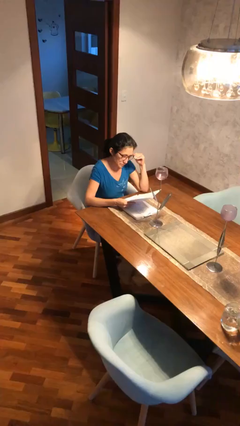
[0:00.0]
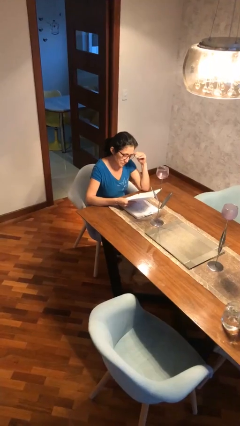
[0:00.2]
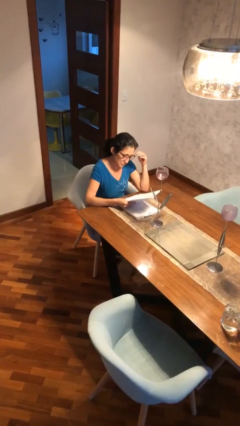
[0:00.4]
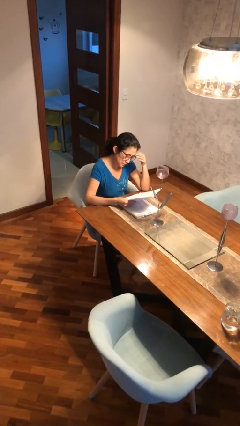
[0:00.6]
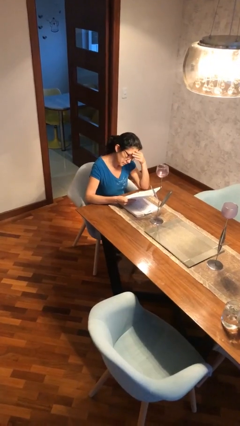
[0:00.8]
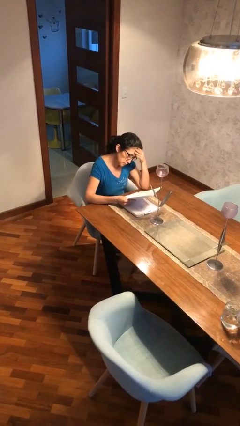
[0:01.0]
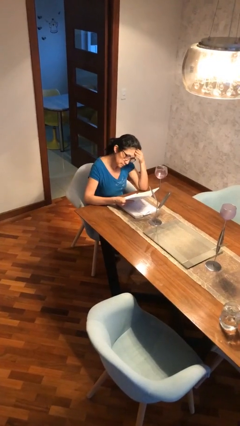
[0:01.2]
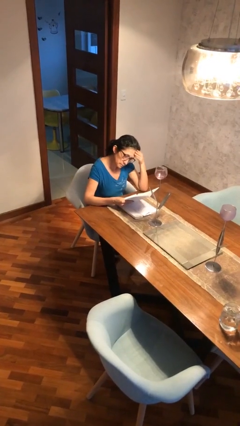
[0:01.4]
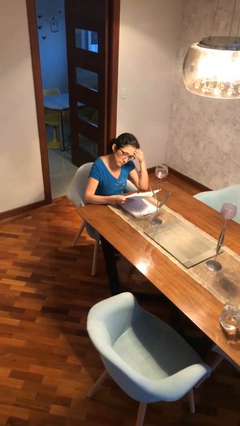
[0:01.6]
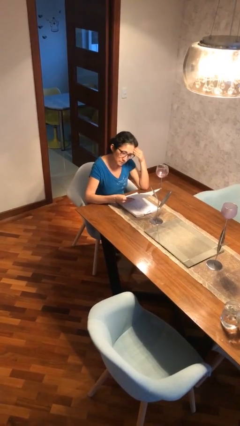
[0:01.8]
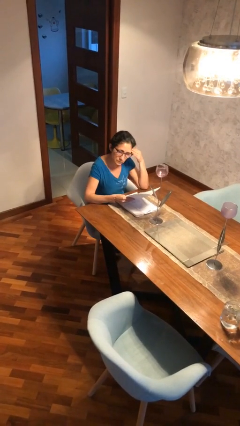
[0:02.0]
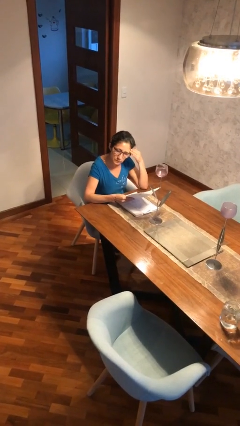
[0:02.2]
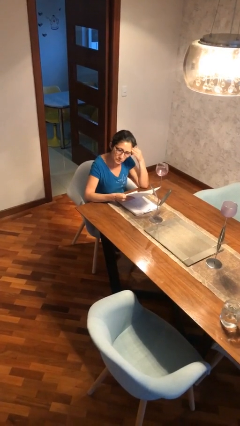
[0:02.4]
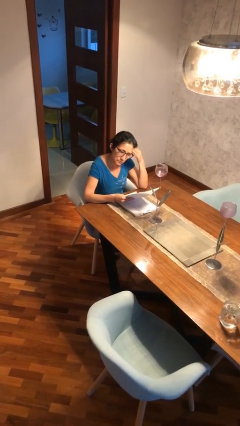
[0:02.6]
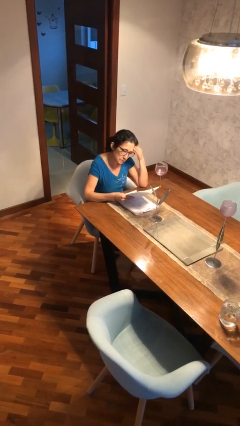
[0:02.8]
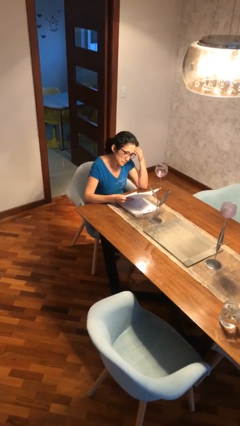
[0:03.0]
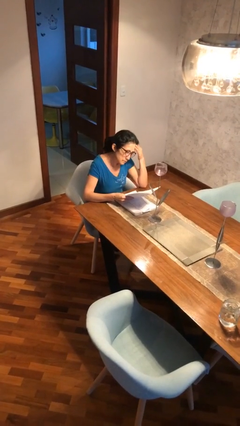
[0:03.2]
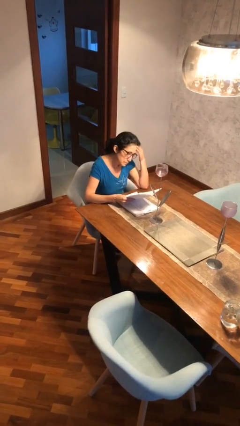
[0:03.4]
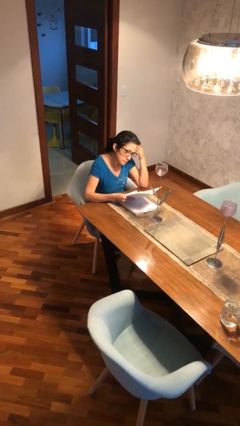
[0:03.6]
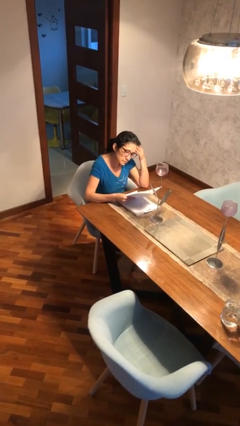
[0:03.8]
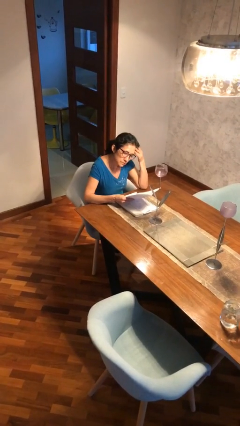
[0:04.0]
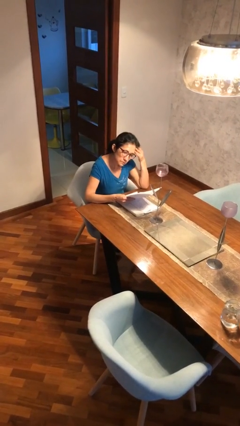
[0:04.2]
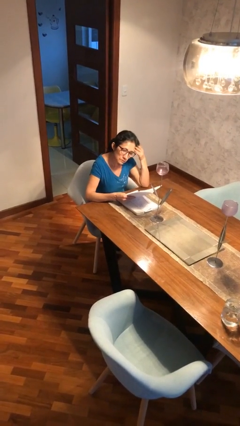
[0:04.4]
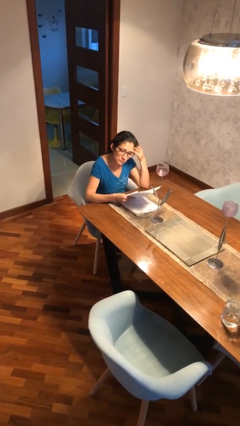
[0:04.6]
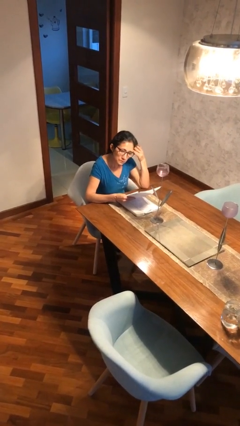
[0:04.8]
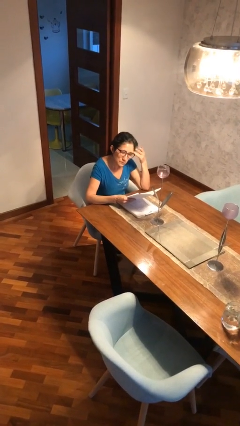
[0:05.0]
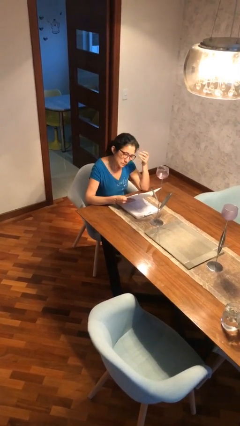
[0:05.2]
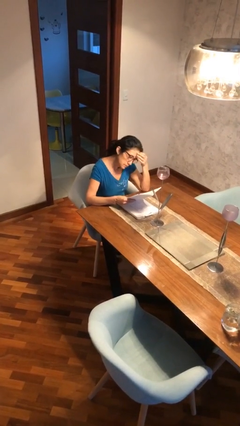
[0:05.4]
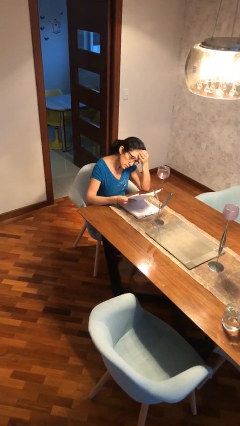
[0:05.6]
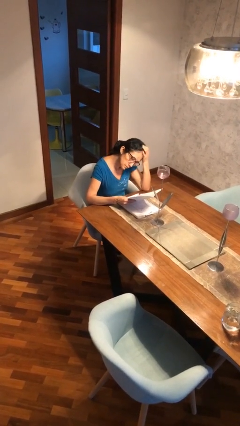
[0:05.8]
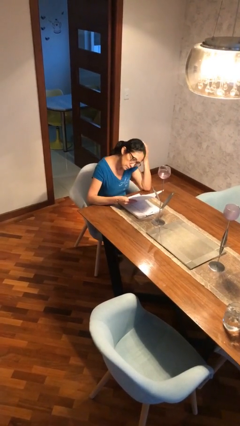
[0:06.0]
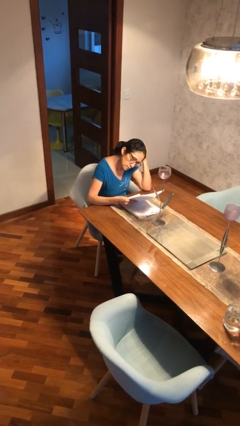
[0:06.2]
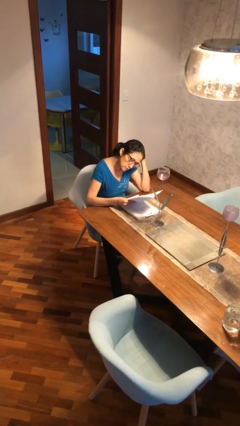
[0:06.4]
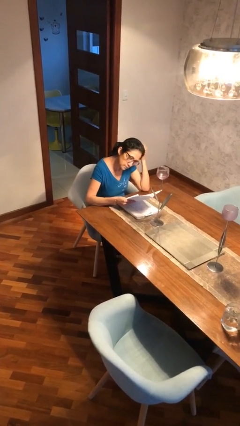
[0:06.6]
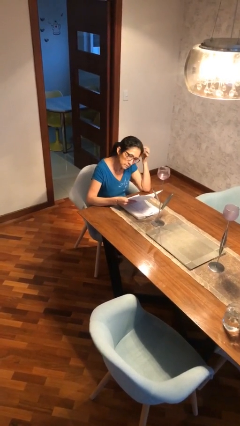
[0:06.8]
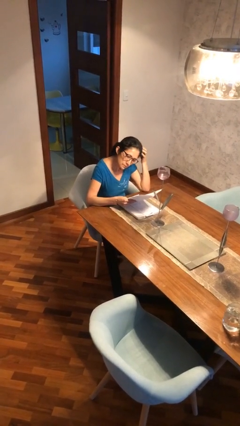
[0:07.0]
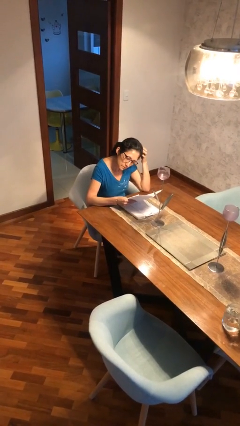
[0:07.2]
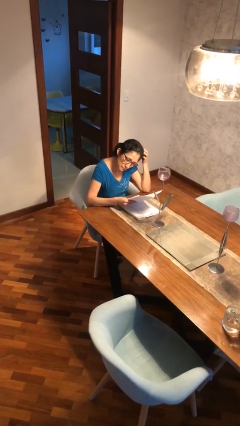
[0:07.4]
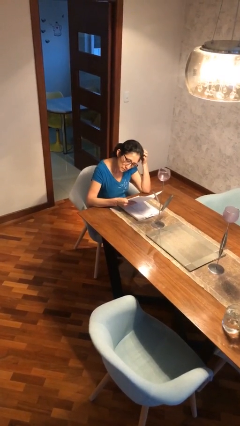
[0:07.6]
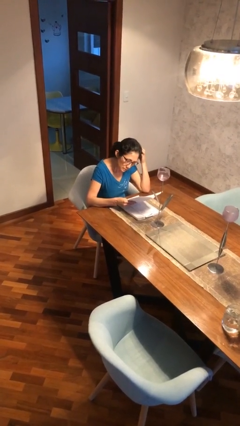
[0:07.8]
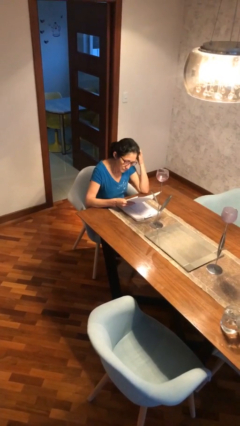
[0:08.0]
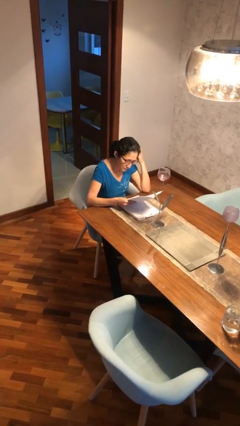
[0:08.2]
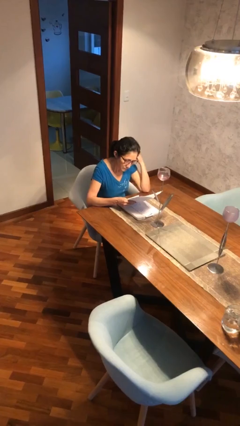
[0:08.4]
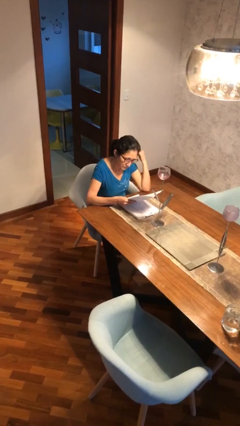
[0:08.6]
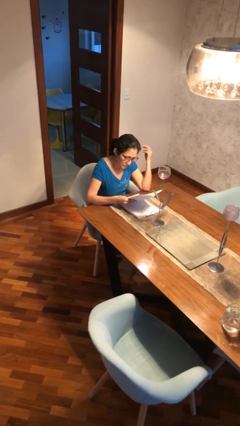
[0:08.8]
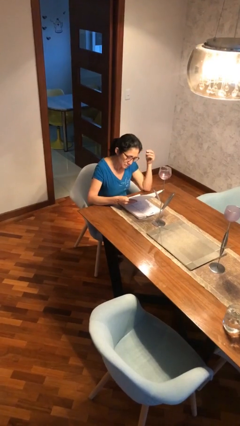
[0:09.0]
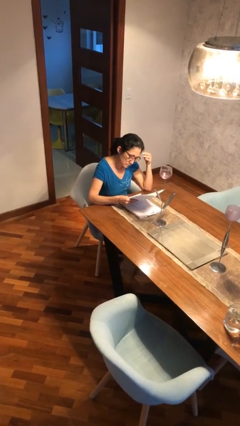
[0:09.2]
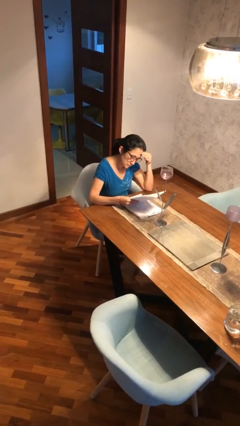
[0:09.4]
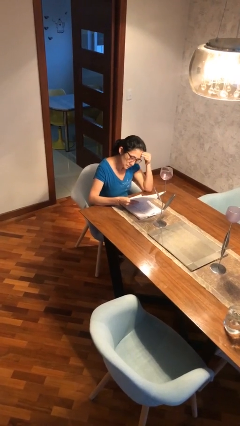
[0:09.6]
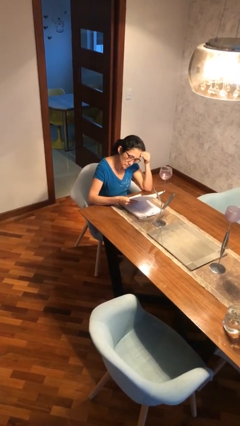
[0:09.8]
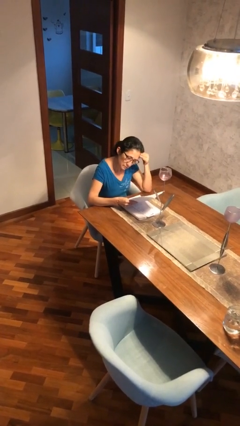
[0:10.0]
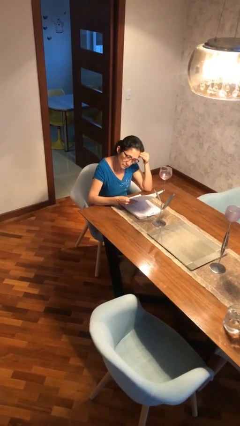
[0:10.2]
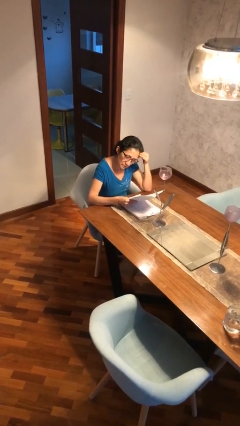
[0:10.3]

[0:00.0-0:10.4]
person reads document

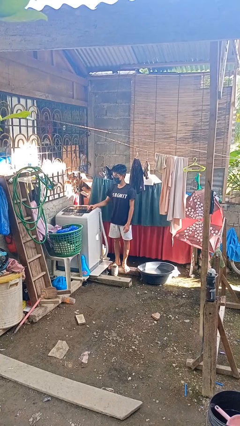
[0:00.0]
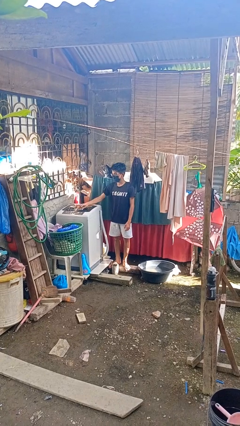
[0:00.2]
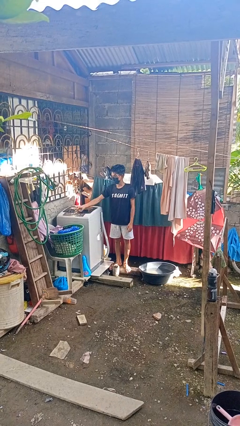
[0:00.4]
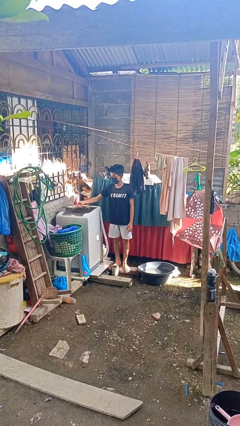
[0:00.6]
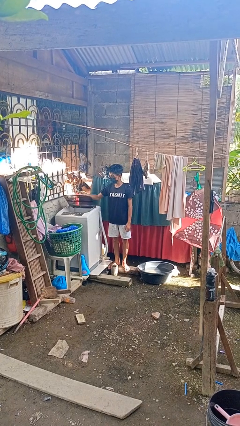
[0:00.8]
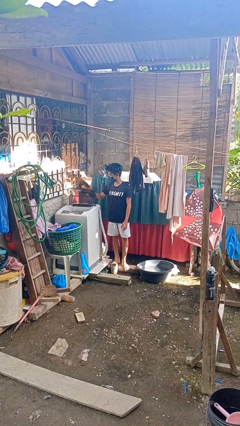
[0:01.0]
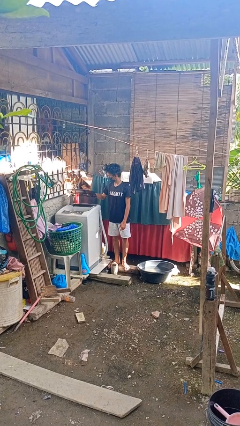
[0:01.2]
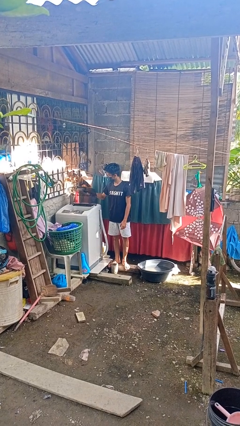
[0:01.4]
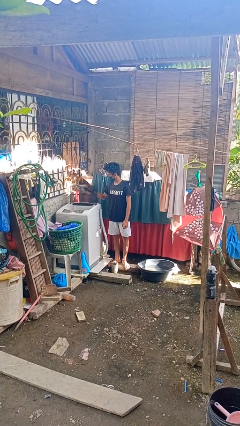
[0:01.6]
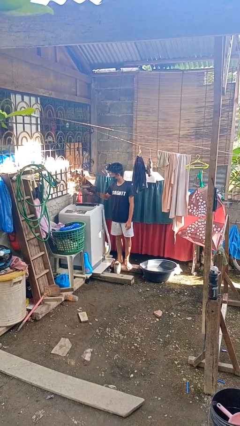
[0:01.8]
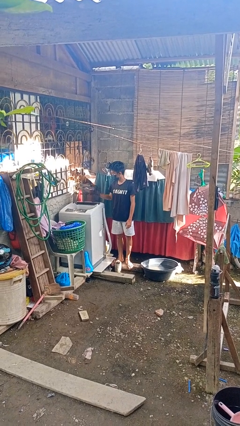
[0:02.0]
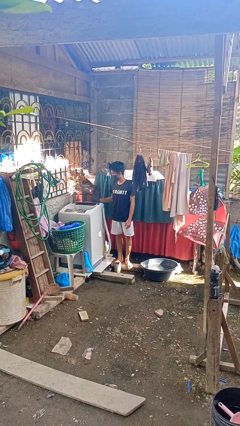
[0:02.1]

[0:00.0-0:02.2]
person opens clothes washer

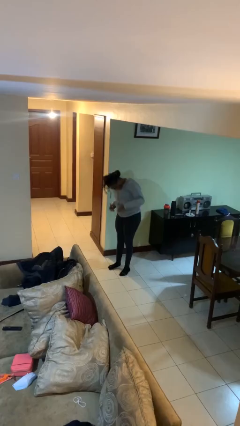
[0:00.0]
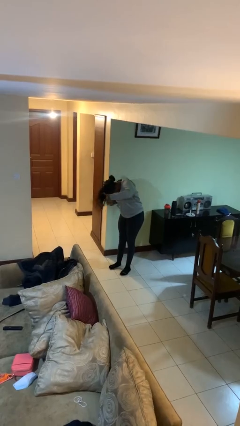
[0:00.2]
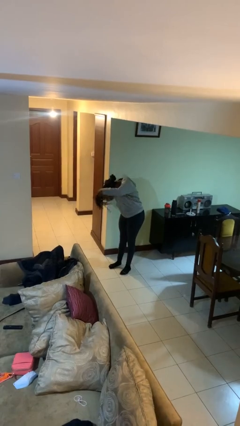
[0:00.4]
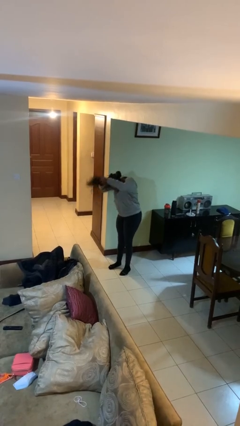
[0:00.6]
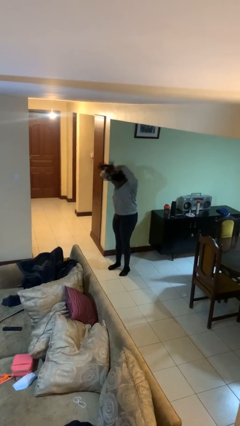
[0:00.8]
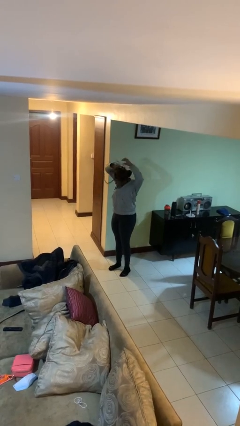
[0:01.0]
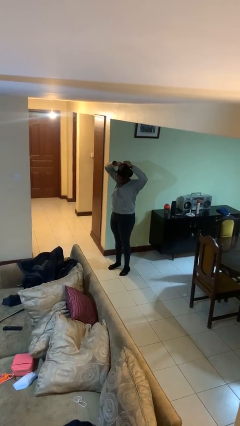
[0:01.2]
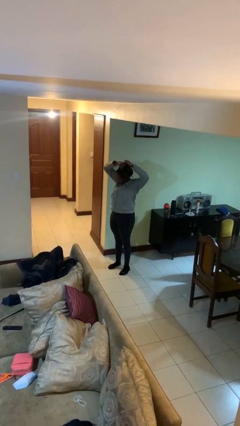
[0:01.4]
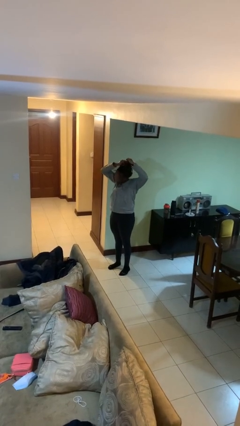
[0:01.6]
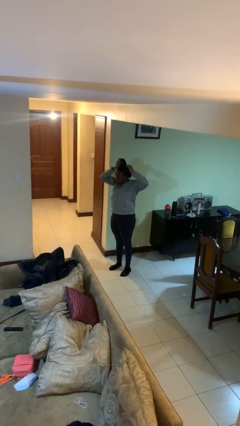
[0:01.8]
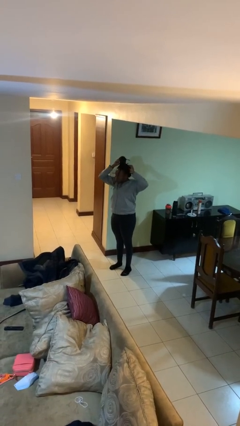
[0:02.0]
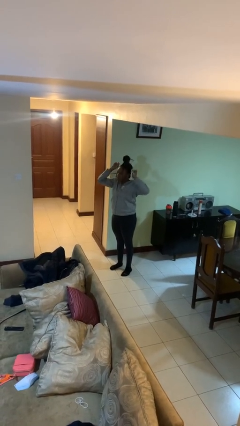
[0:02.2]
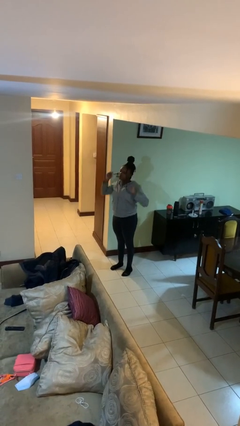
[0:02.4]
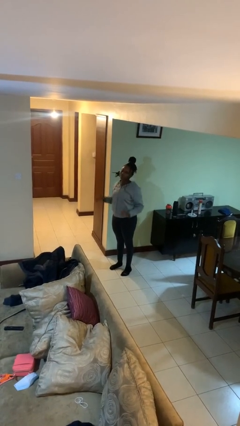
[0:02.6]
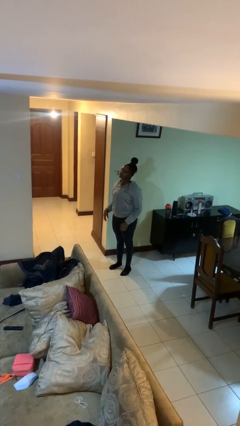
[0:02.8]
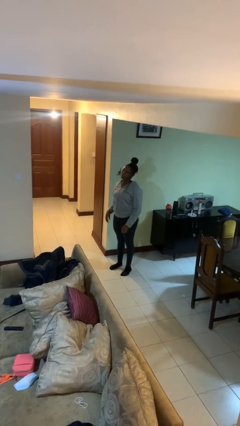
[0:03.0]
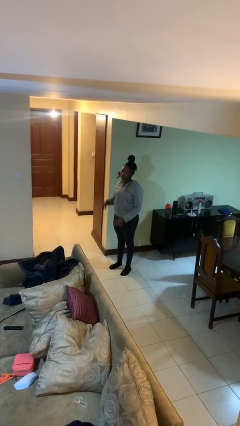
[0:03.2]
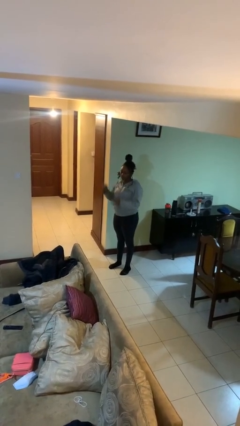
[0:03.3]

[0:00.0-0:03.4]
person puts hair in ponytail

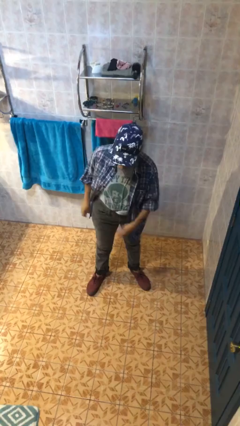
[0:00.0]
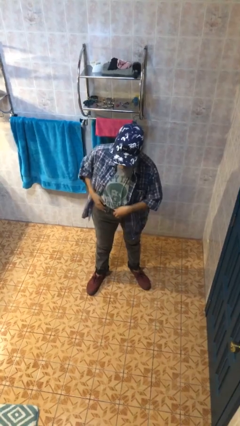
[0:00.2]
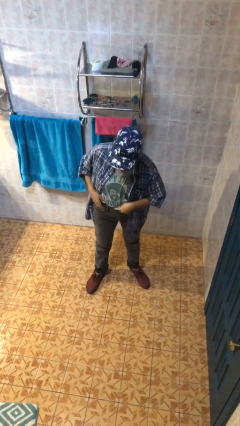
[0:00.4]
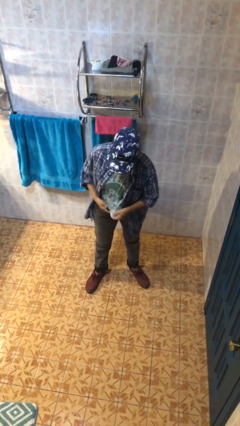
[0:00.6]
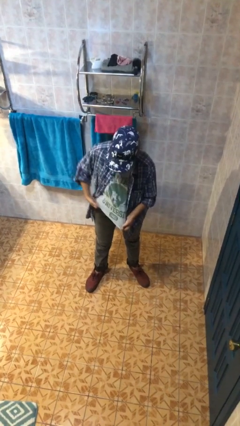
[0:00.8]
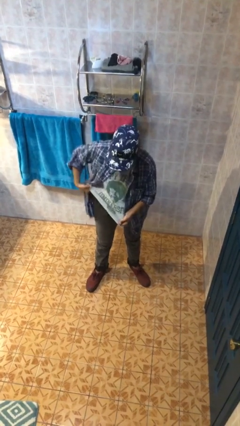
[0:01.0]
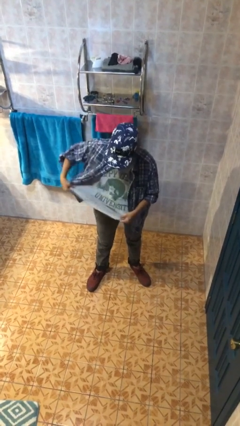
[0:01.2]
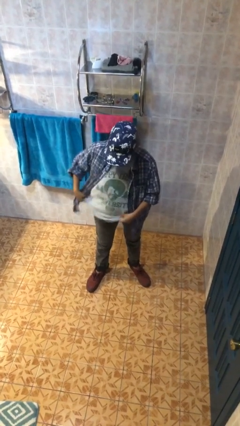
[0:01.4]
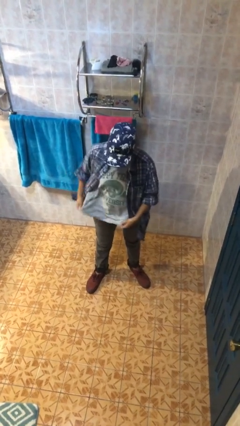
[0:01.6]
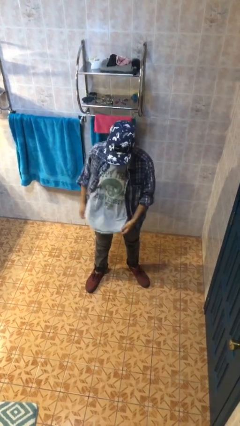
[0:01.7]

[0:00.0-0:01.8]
person untucks shirt
